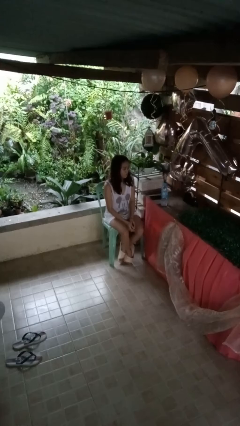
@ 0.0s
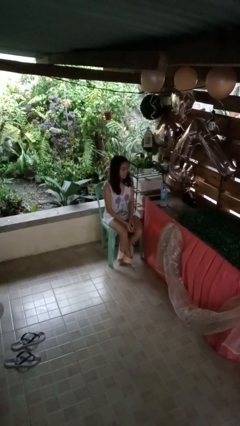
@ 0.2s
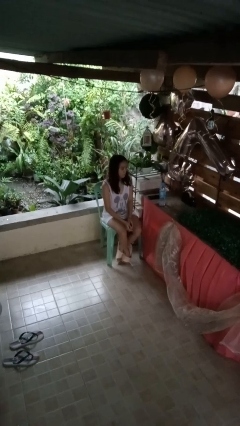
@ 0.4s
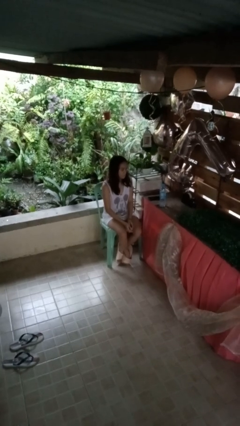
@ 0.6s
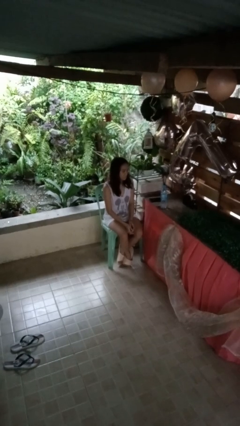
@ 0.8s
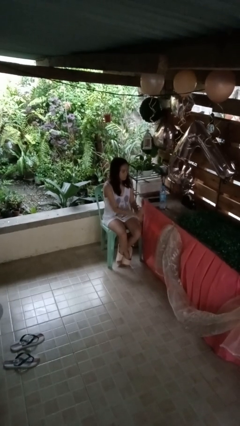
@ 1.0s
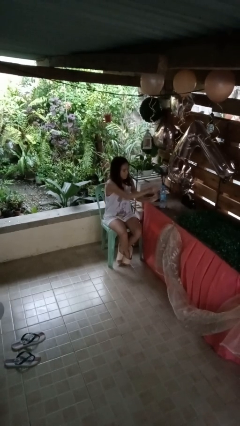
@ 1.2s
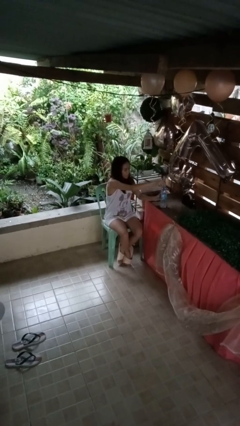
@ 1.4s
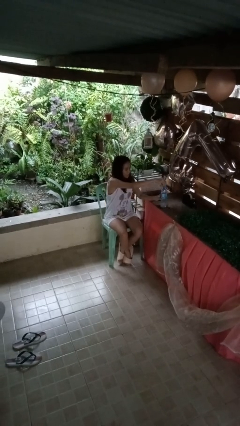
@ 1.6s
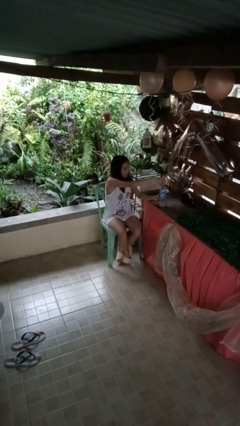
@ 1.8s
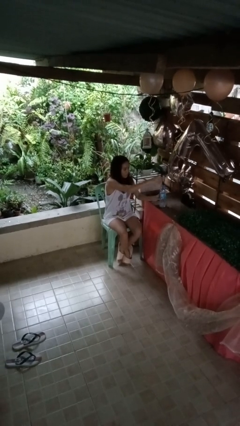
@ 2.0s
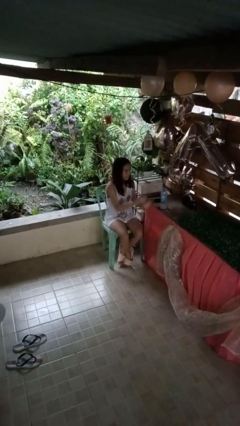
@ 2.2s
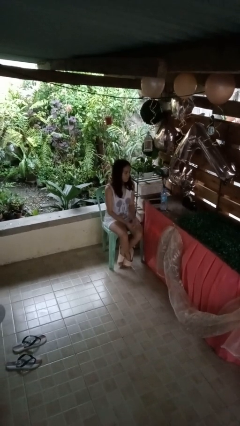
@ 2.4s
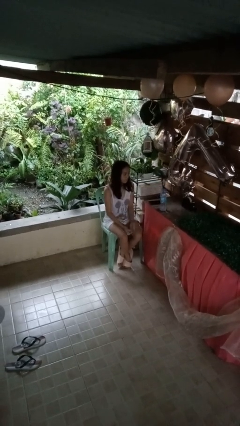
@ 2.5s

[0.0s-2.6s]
person unscrews lid from bottle

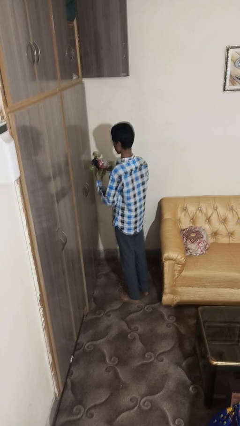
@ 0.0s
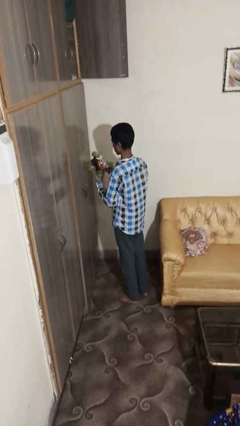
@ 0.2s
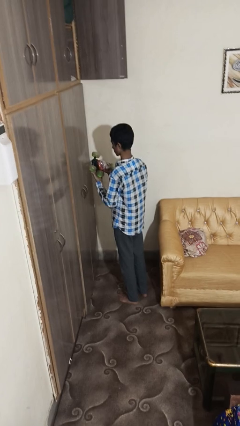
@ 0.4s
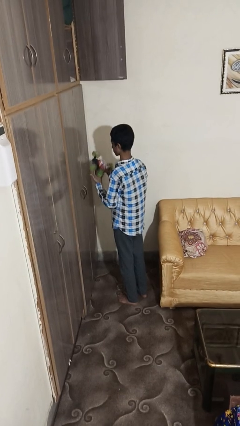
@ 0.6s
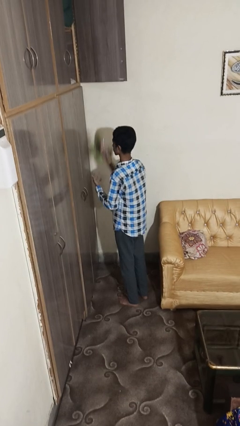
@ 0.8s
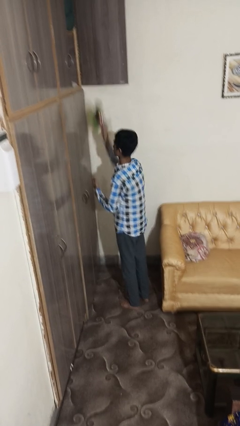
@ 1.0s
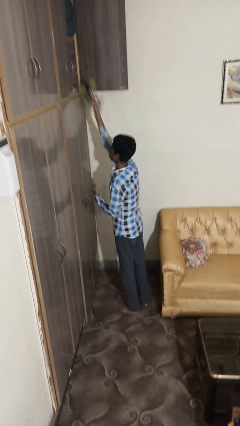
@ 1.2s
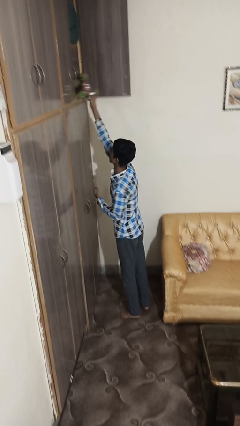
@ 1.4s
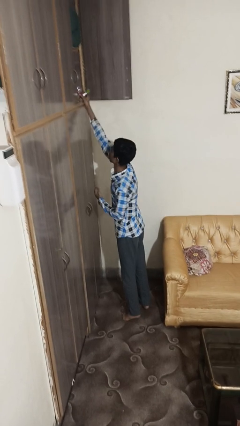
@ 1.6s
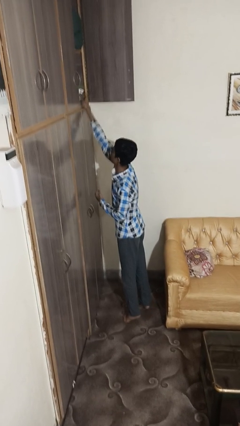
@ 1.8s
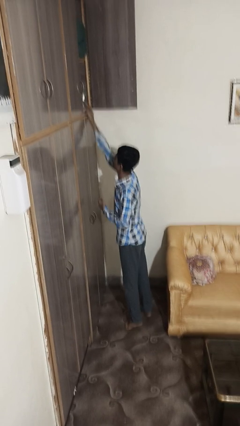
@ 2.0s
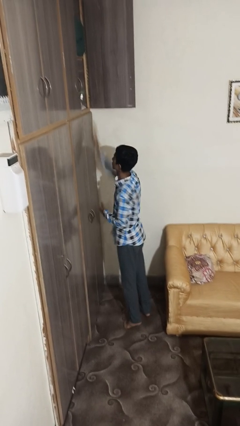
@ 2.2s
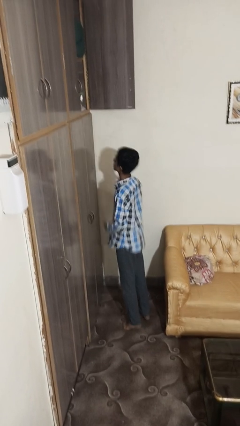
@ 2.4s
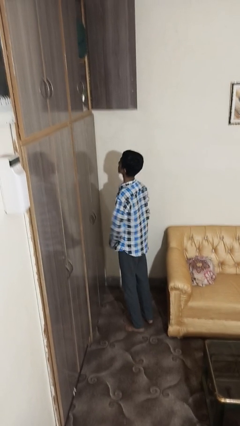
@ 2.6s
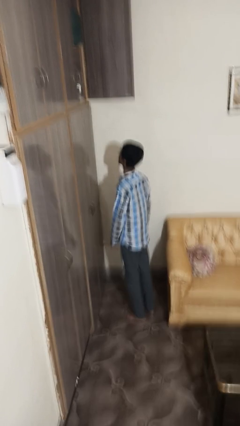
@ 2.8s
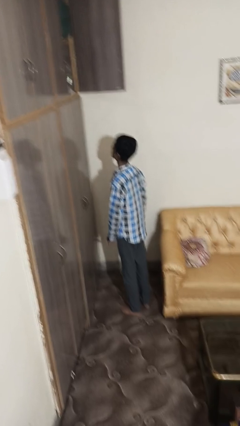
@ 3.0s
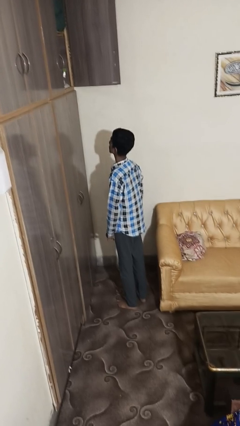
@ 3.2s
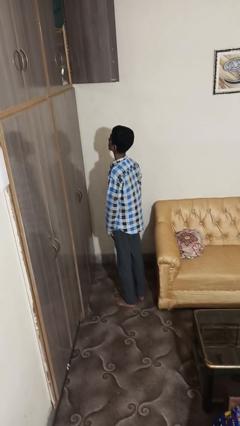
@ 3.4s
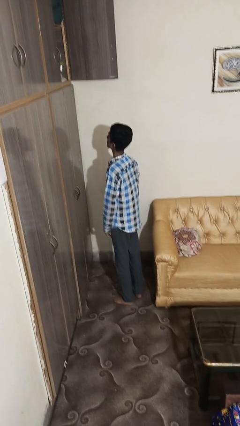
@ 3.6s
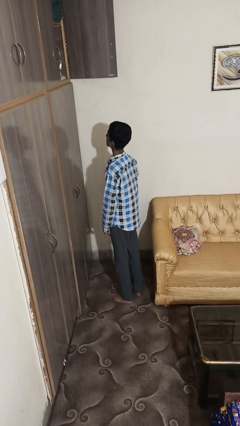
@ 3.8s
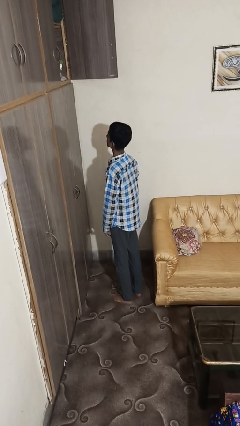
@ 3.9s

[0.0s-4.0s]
person puts down object on shelf

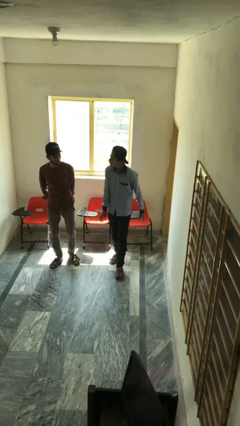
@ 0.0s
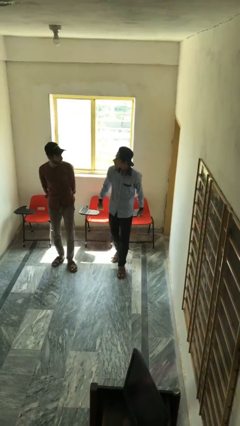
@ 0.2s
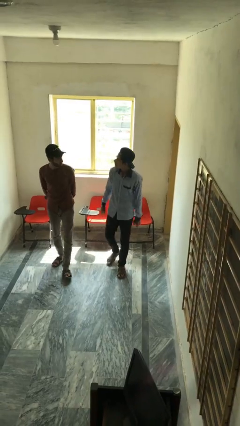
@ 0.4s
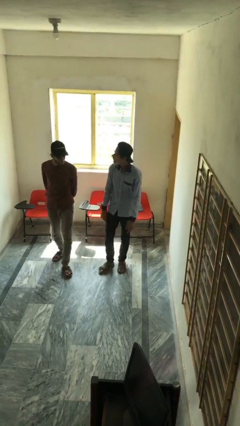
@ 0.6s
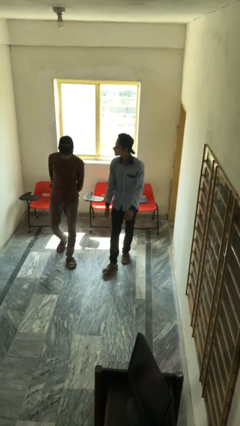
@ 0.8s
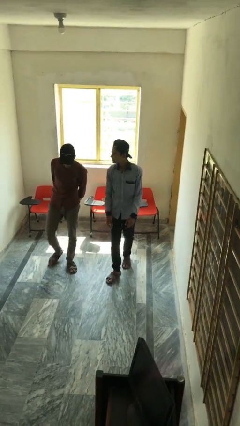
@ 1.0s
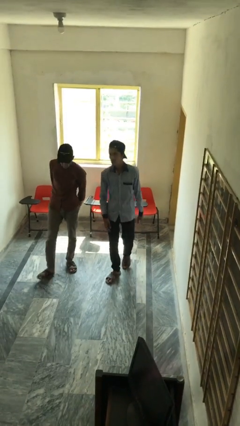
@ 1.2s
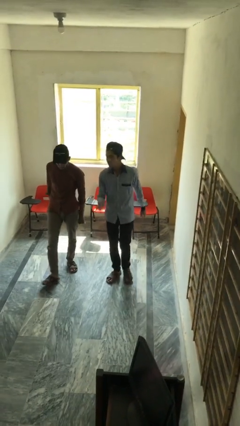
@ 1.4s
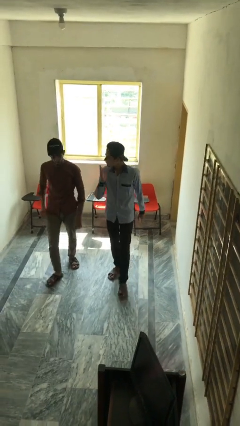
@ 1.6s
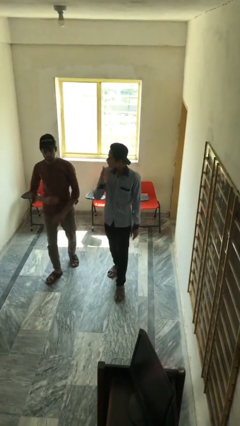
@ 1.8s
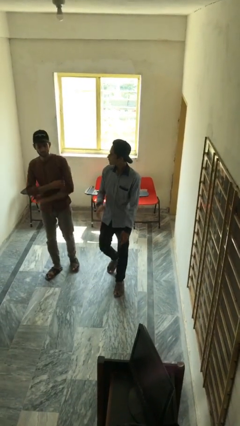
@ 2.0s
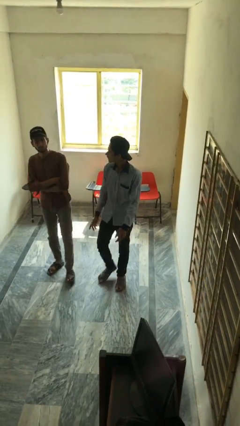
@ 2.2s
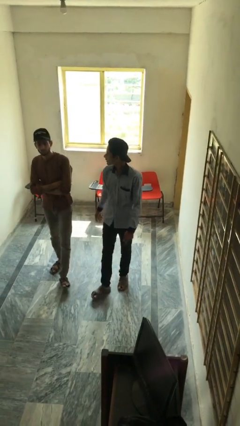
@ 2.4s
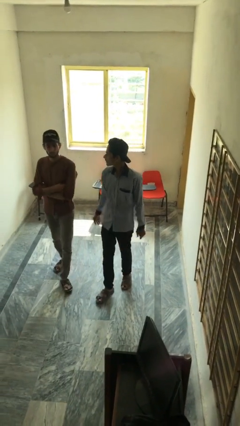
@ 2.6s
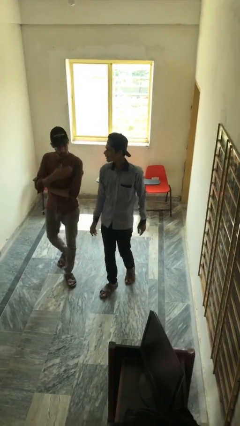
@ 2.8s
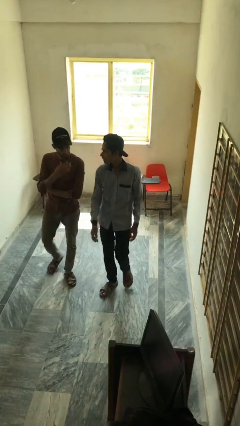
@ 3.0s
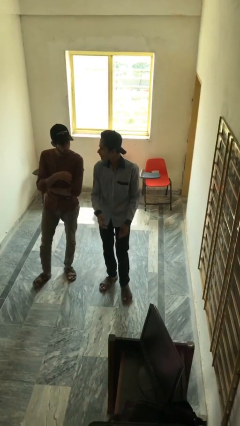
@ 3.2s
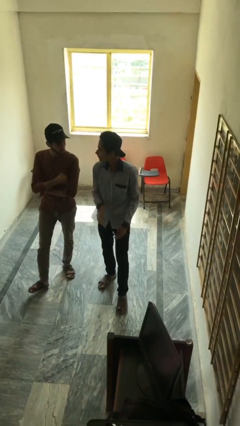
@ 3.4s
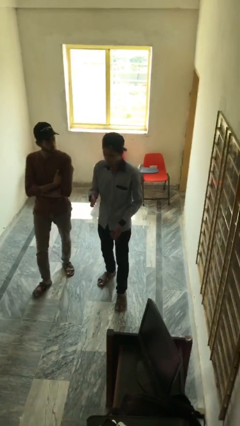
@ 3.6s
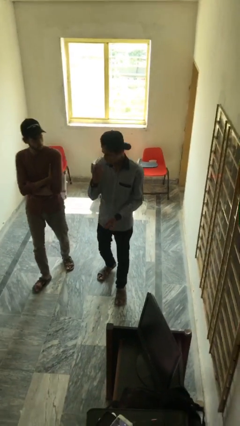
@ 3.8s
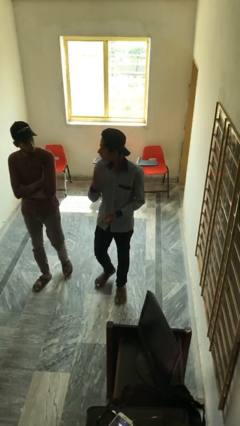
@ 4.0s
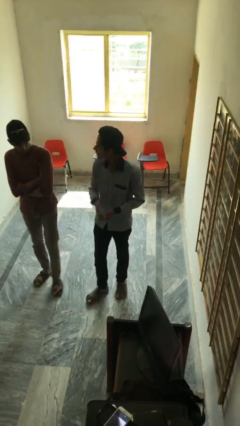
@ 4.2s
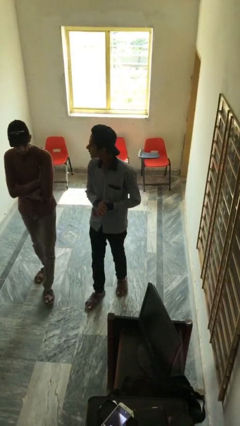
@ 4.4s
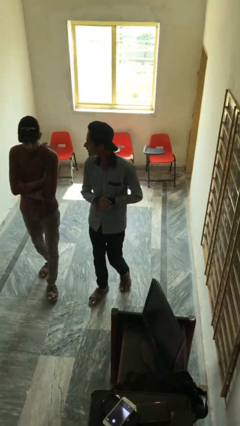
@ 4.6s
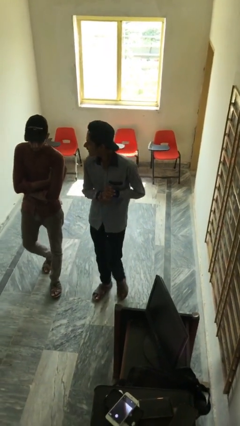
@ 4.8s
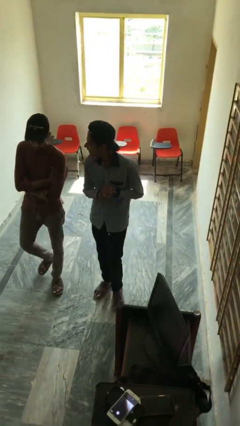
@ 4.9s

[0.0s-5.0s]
person talks to person

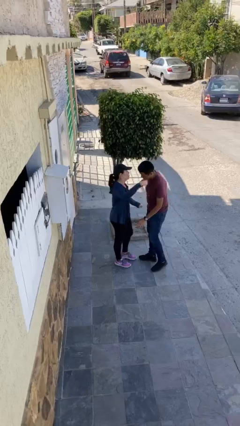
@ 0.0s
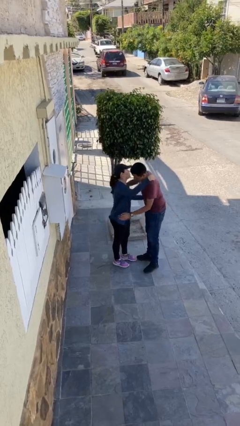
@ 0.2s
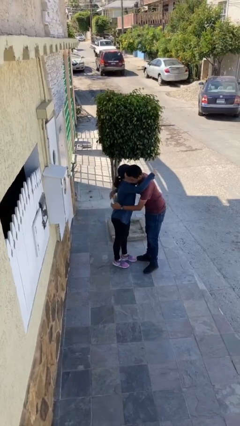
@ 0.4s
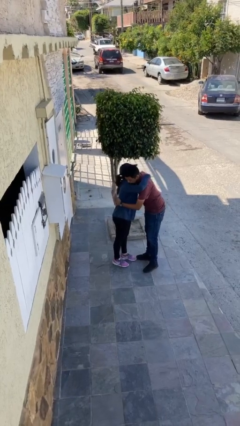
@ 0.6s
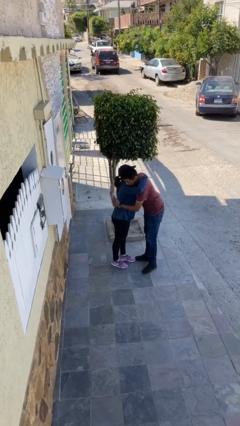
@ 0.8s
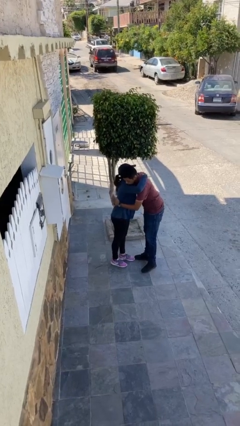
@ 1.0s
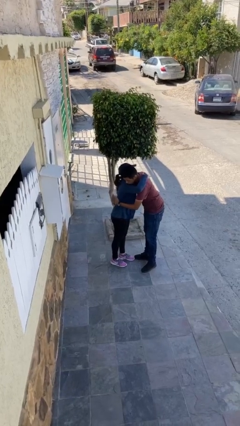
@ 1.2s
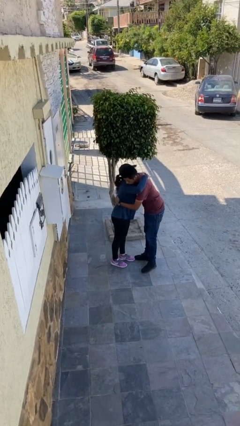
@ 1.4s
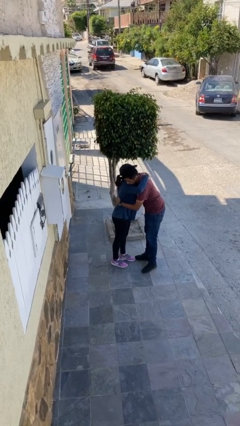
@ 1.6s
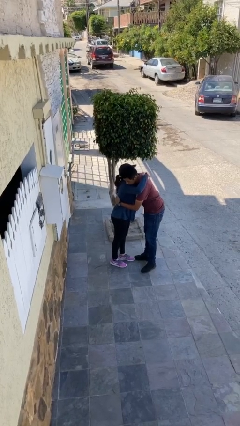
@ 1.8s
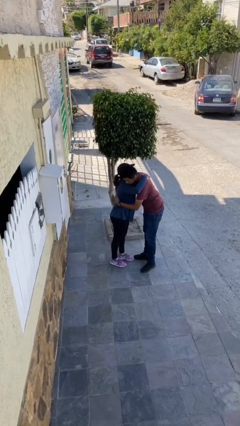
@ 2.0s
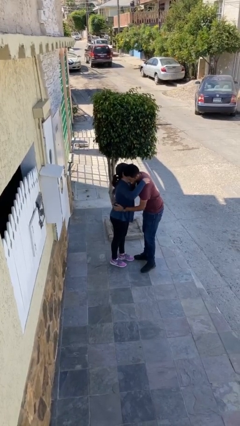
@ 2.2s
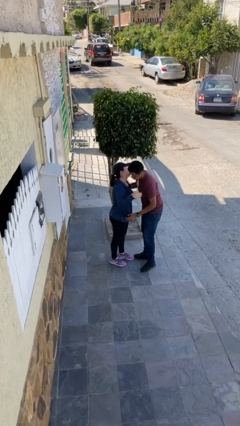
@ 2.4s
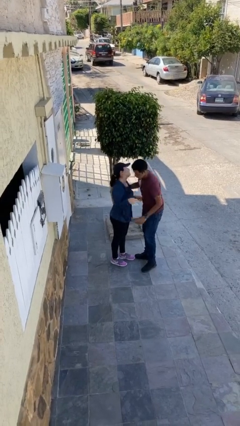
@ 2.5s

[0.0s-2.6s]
person embraces person

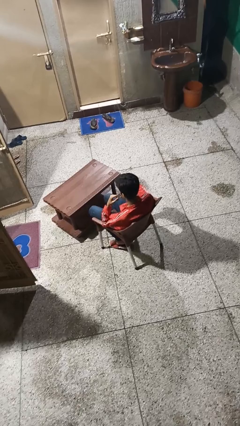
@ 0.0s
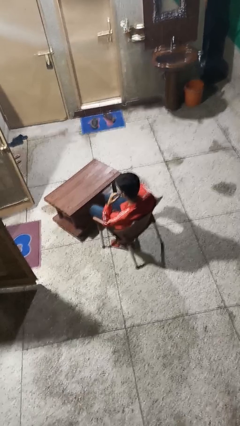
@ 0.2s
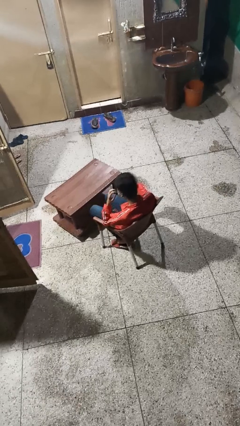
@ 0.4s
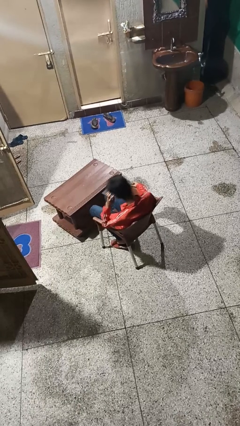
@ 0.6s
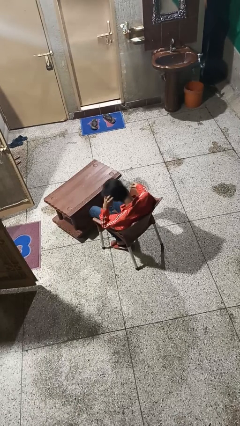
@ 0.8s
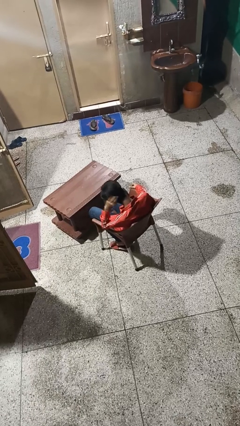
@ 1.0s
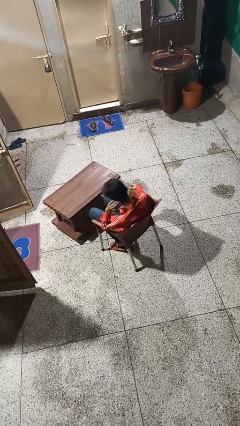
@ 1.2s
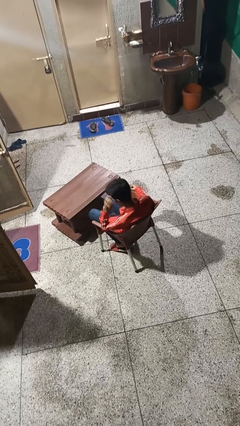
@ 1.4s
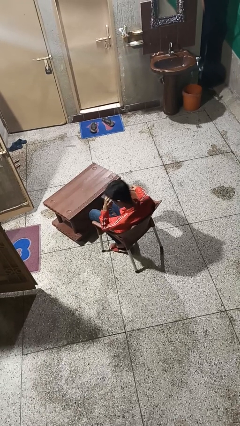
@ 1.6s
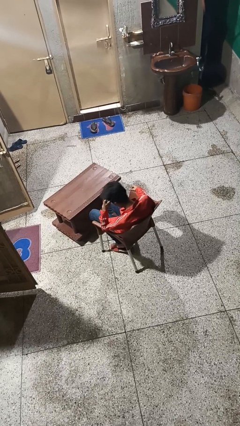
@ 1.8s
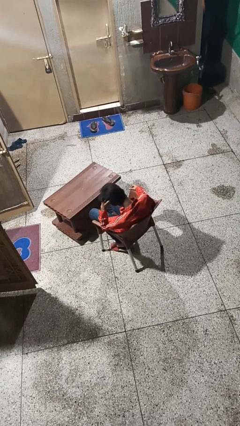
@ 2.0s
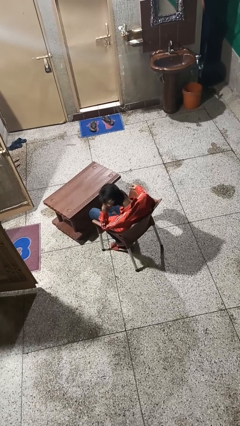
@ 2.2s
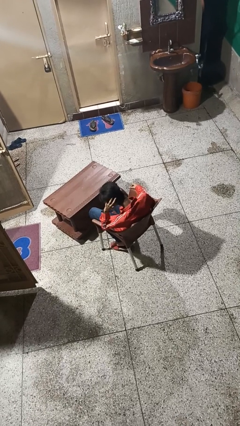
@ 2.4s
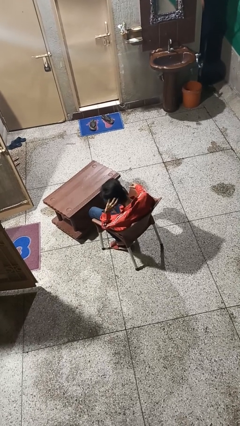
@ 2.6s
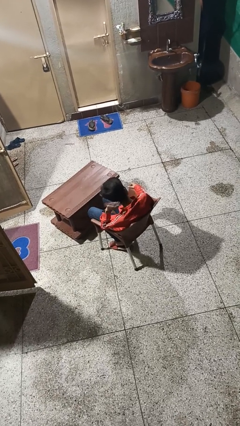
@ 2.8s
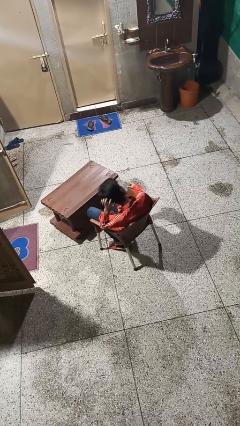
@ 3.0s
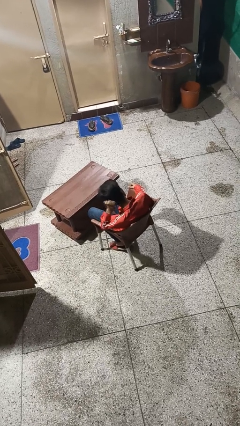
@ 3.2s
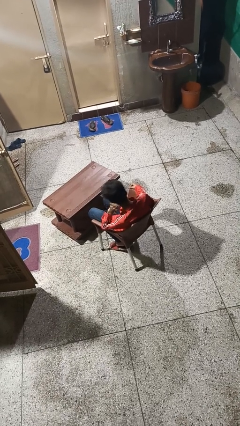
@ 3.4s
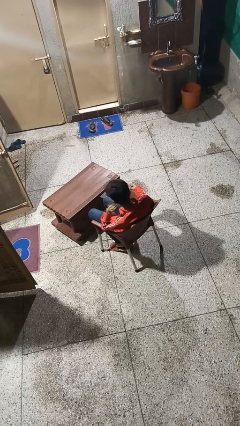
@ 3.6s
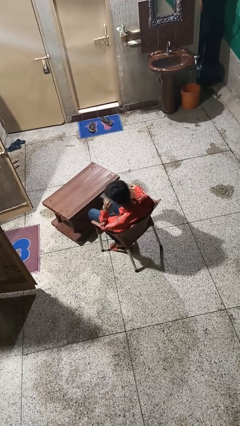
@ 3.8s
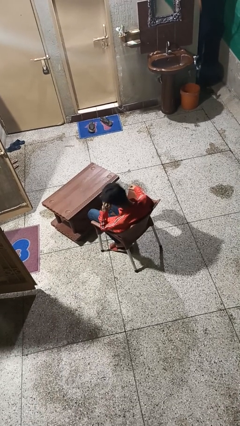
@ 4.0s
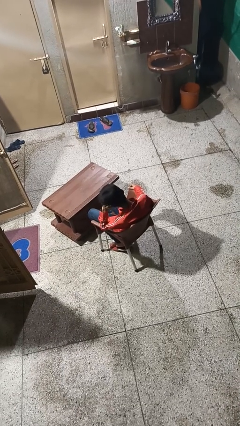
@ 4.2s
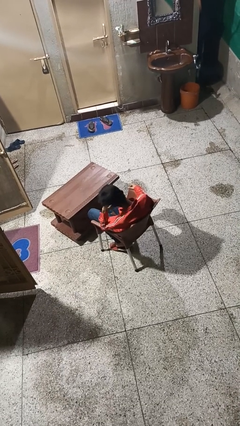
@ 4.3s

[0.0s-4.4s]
person strokes hair
